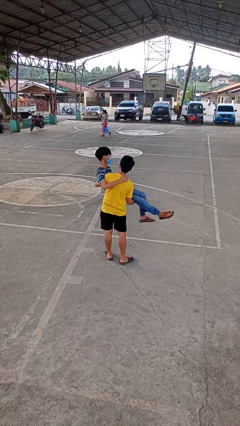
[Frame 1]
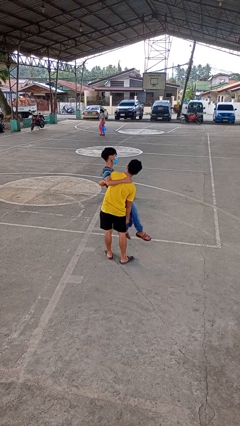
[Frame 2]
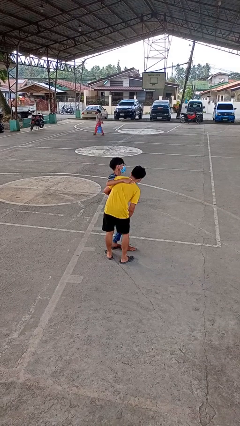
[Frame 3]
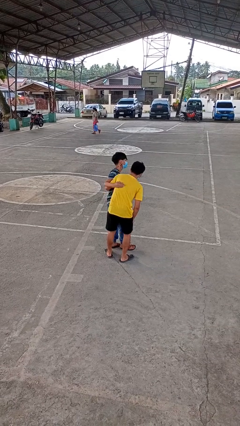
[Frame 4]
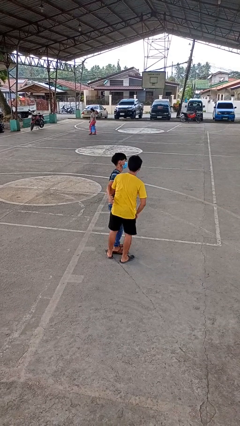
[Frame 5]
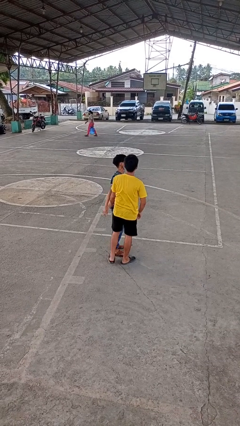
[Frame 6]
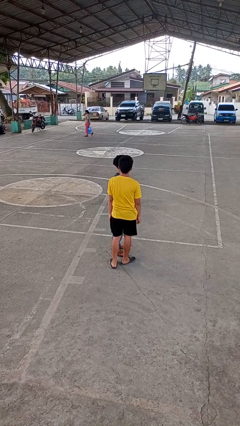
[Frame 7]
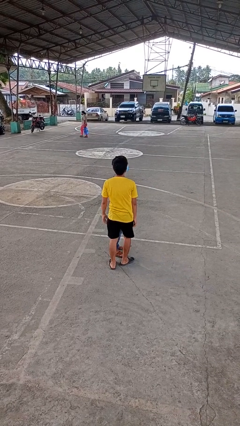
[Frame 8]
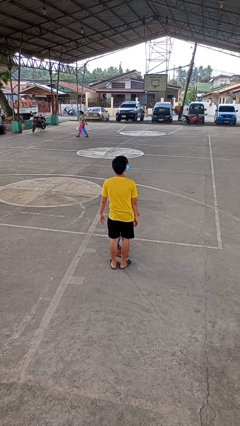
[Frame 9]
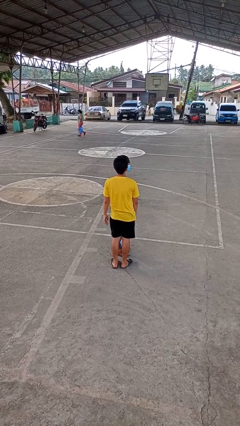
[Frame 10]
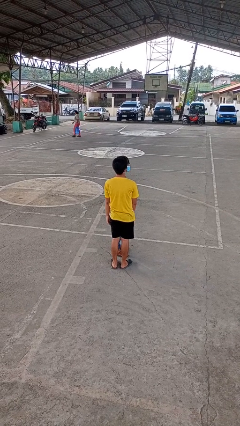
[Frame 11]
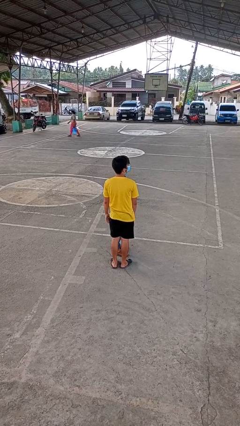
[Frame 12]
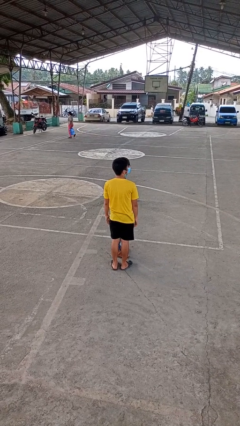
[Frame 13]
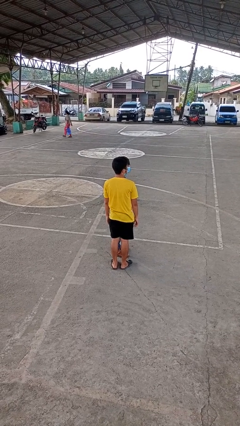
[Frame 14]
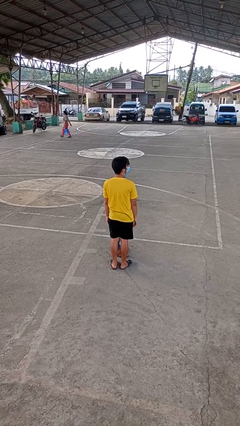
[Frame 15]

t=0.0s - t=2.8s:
person puts down person

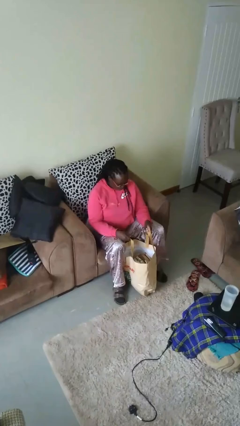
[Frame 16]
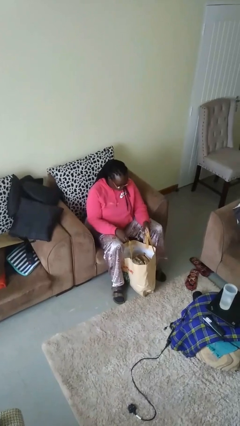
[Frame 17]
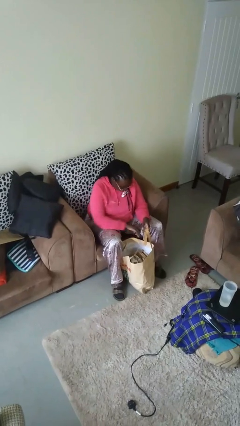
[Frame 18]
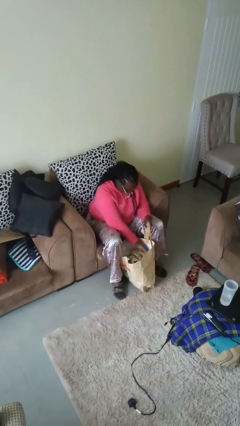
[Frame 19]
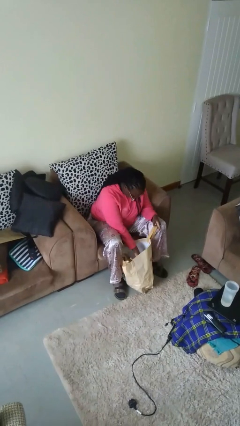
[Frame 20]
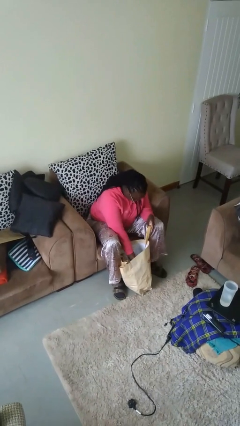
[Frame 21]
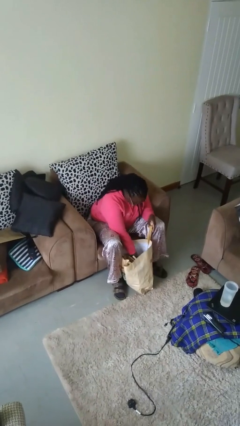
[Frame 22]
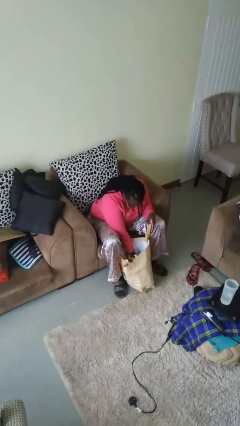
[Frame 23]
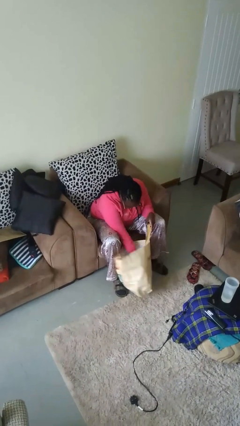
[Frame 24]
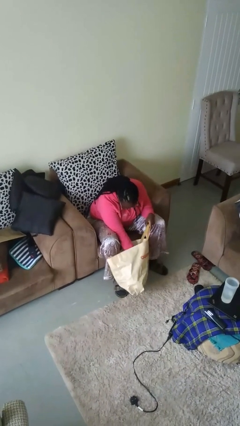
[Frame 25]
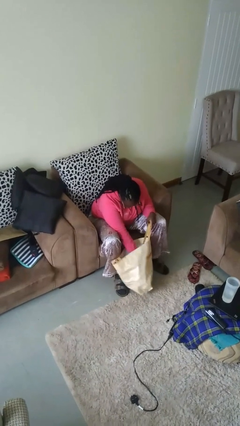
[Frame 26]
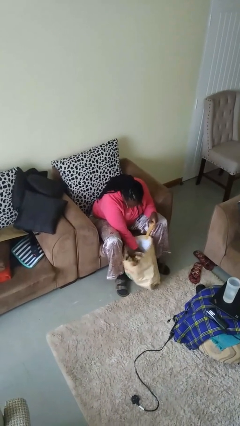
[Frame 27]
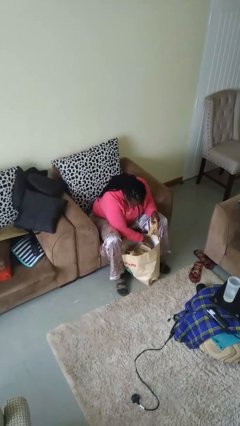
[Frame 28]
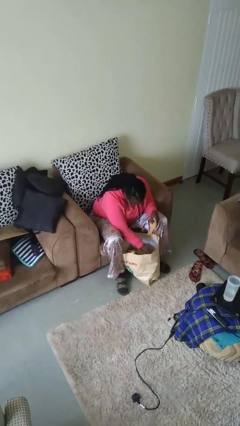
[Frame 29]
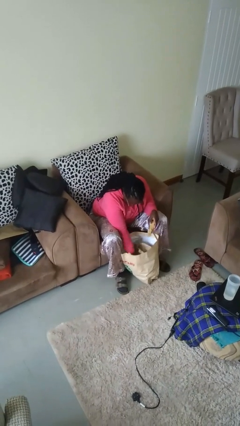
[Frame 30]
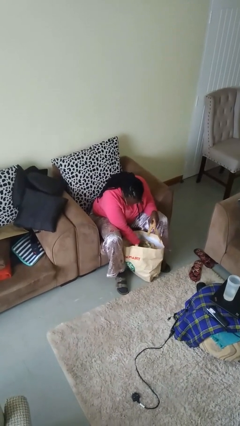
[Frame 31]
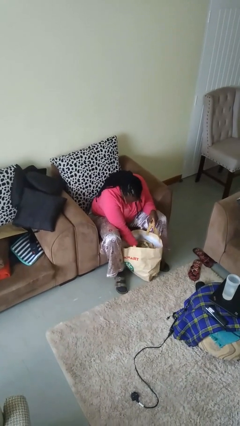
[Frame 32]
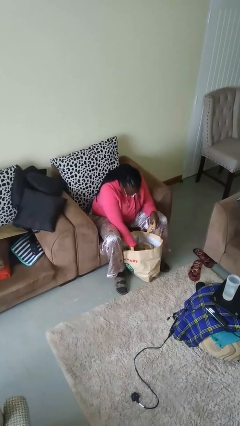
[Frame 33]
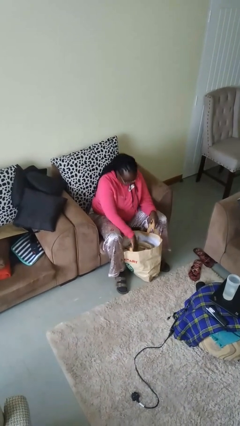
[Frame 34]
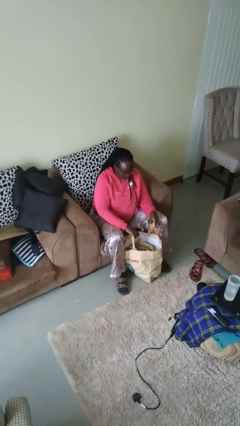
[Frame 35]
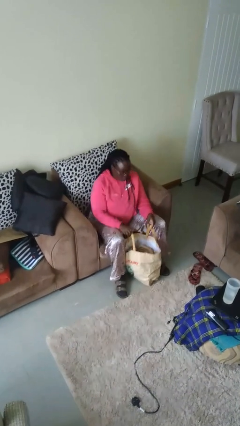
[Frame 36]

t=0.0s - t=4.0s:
person searches in bag

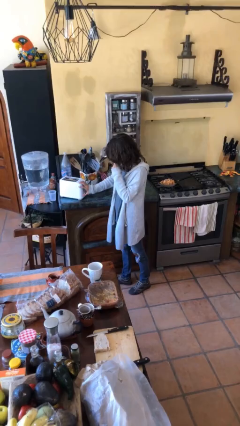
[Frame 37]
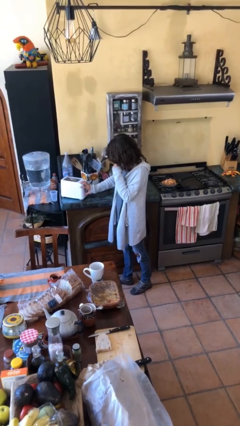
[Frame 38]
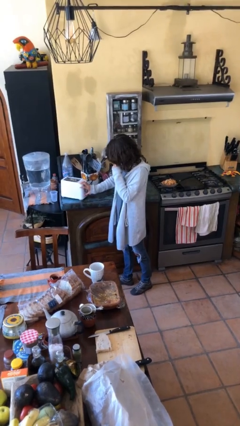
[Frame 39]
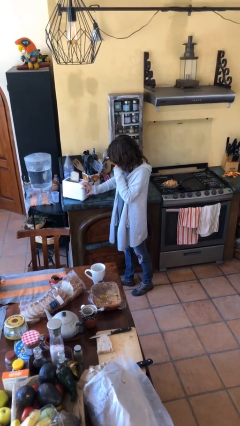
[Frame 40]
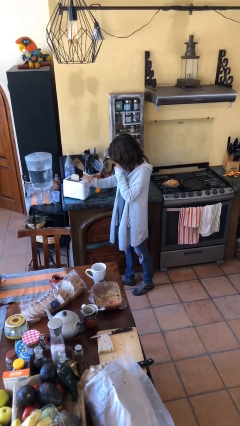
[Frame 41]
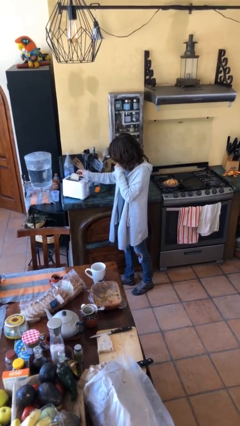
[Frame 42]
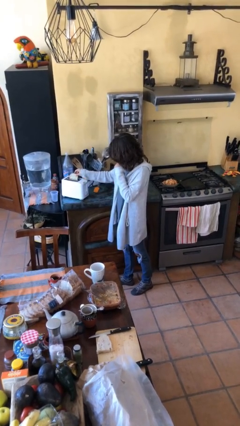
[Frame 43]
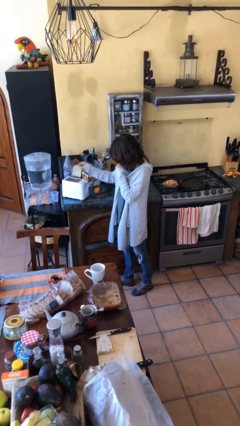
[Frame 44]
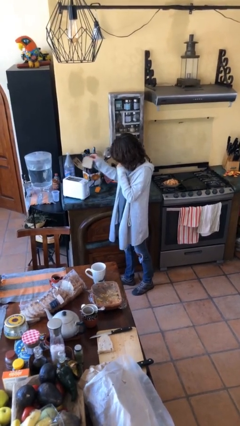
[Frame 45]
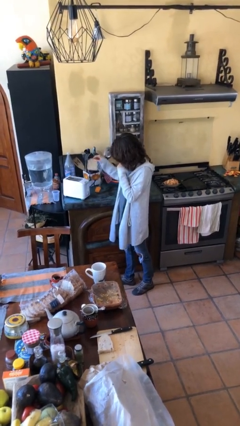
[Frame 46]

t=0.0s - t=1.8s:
person takes object from toaster

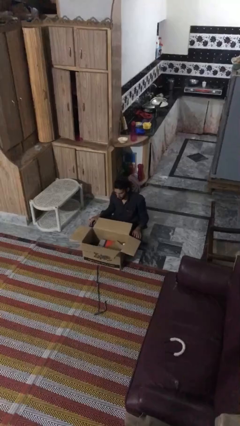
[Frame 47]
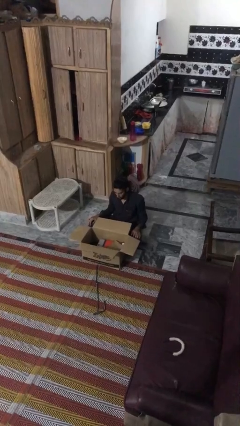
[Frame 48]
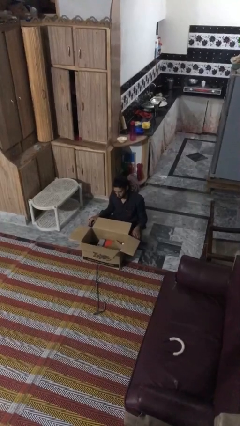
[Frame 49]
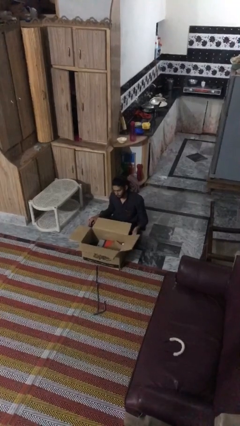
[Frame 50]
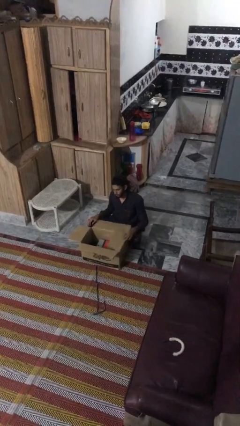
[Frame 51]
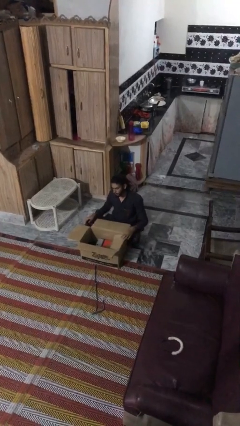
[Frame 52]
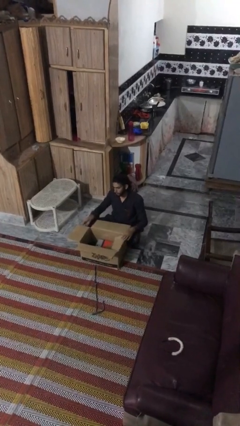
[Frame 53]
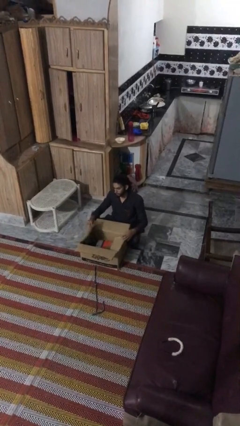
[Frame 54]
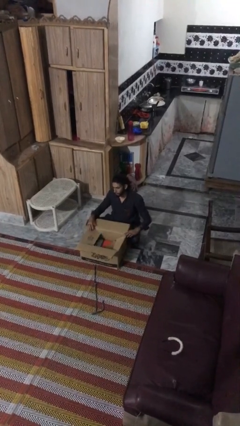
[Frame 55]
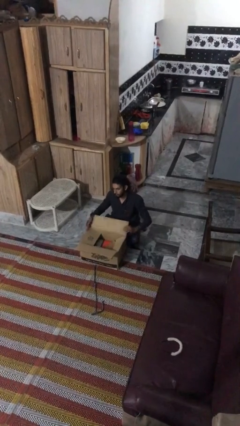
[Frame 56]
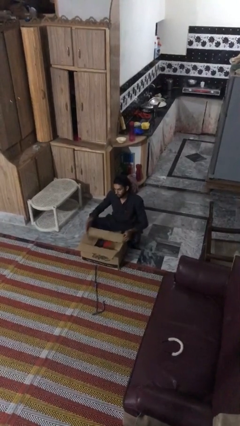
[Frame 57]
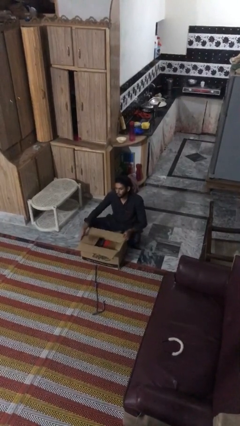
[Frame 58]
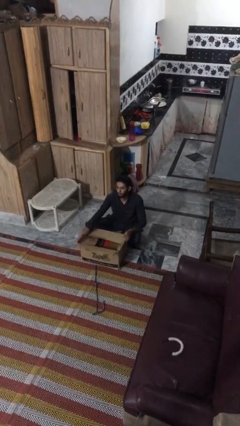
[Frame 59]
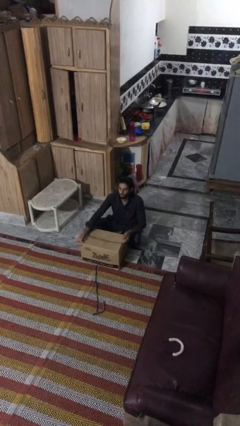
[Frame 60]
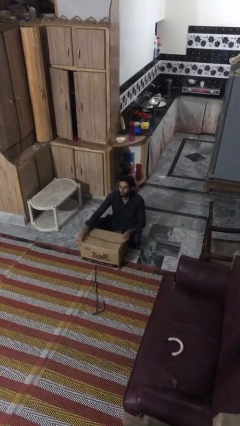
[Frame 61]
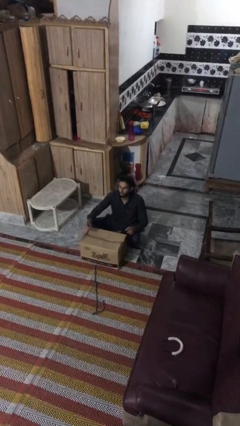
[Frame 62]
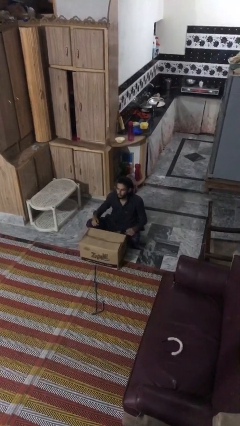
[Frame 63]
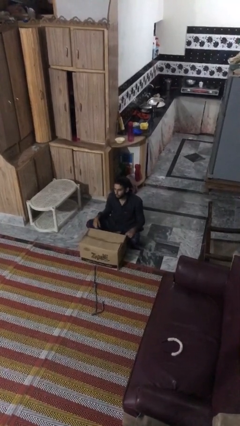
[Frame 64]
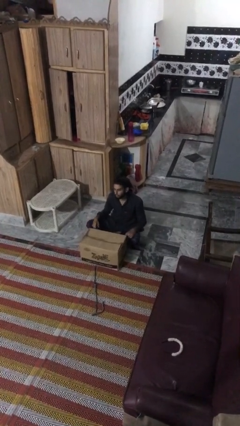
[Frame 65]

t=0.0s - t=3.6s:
person closes box

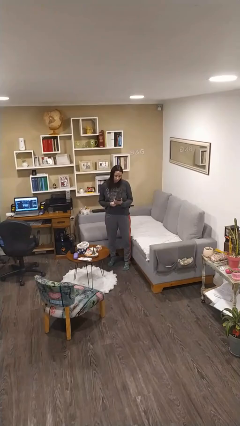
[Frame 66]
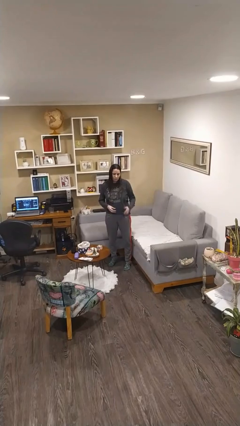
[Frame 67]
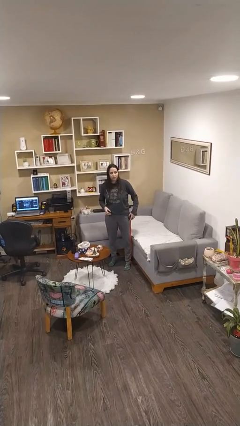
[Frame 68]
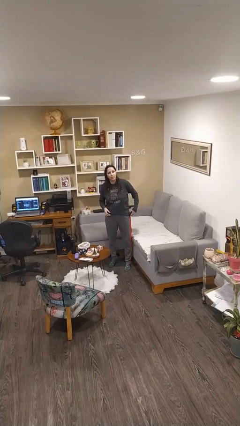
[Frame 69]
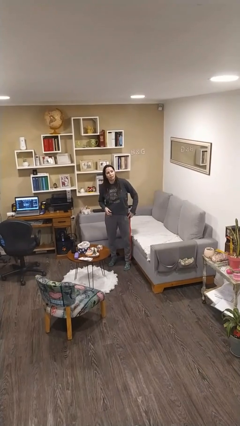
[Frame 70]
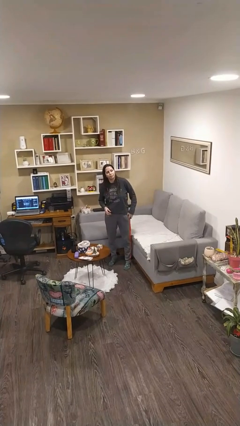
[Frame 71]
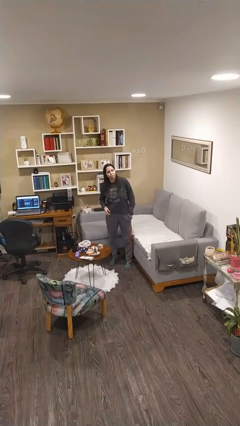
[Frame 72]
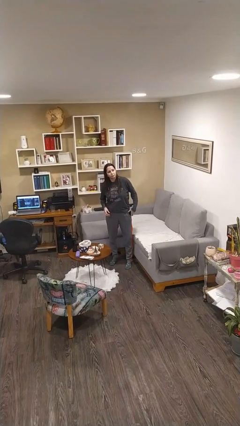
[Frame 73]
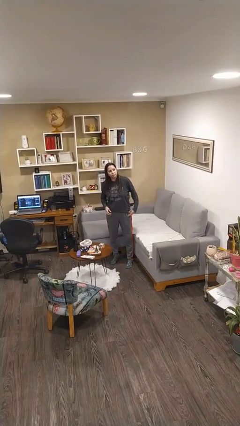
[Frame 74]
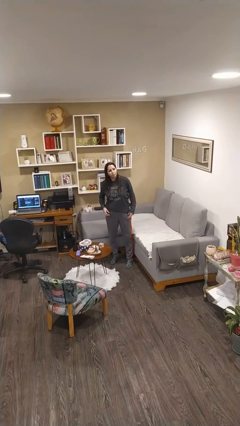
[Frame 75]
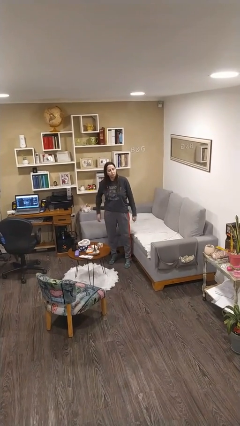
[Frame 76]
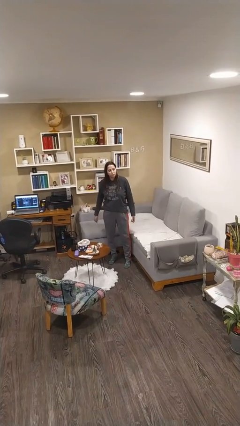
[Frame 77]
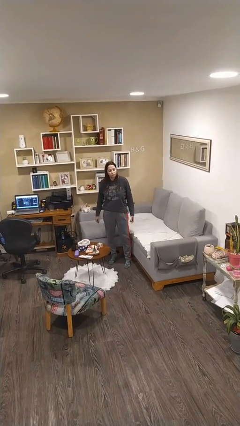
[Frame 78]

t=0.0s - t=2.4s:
person puts phone into pocket

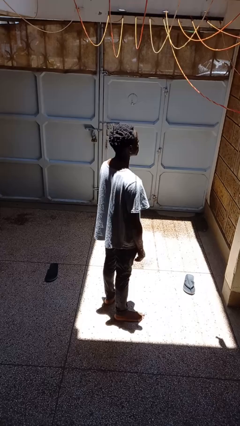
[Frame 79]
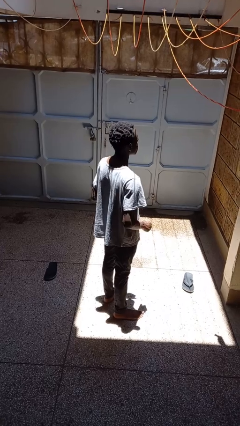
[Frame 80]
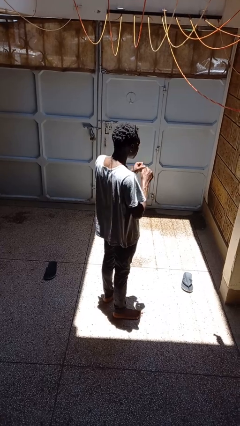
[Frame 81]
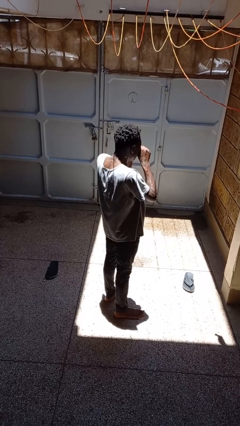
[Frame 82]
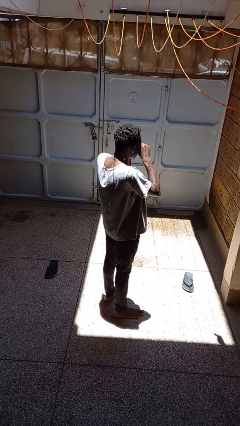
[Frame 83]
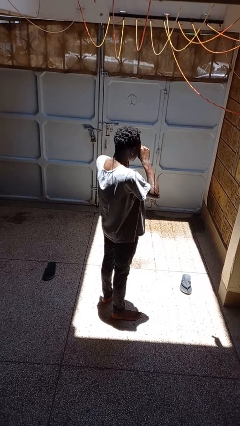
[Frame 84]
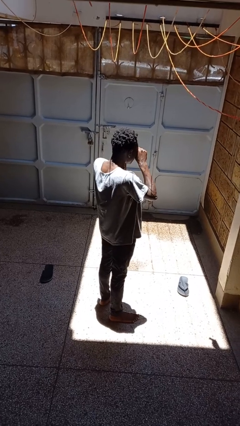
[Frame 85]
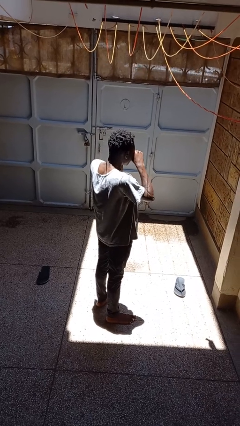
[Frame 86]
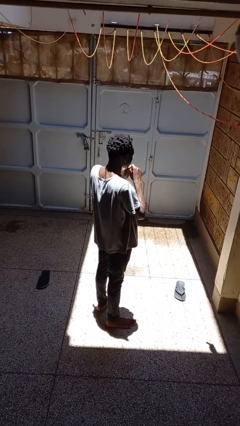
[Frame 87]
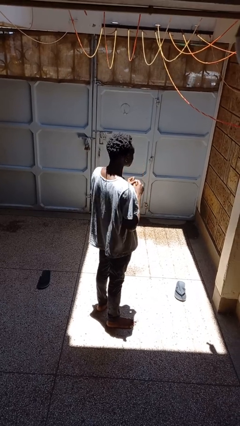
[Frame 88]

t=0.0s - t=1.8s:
person rubs eyes

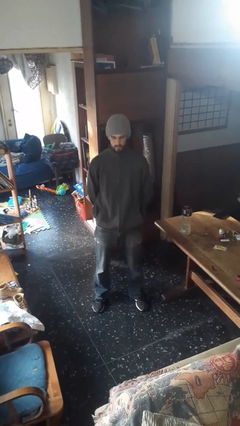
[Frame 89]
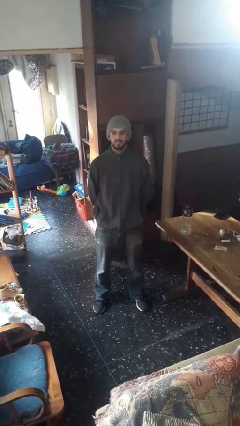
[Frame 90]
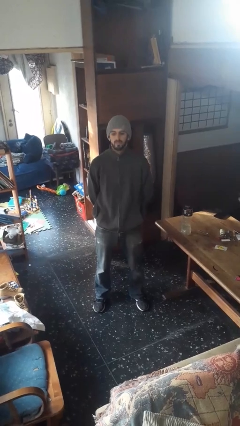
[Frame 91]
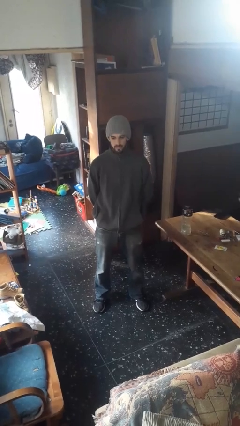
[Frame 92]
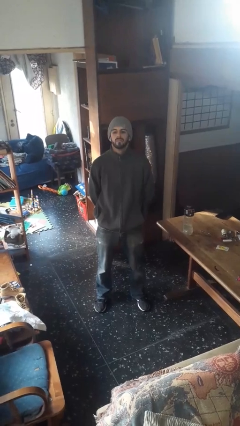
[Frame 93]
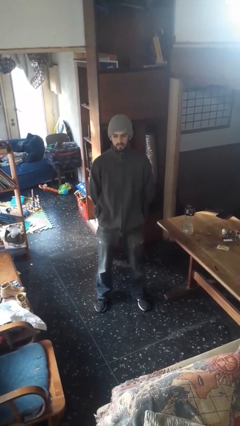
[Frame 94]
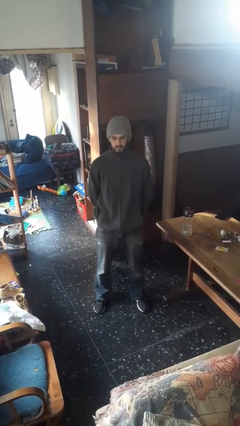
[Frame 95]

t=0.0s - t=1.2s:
person nods head
